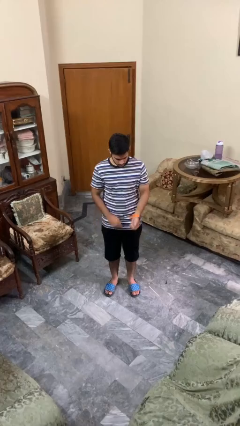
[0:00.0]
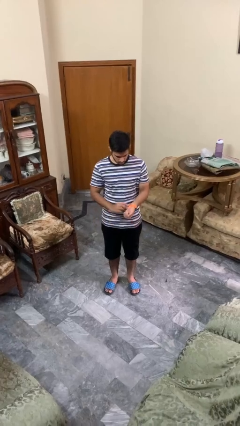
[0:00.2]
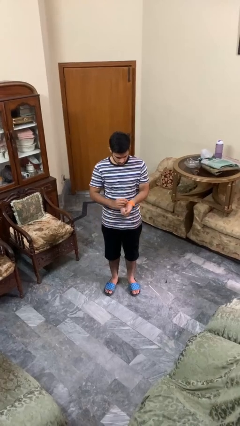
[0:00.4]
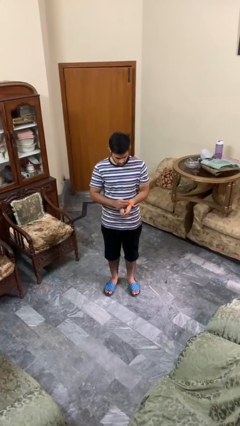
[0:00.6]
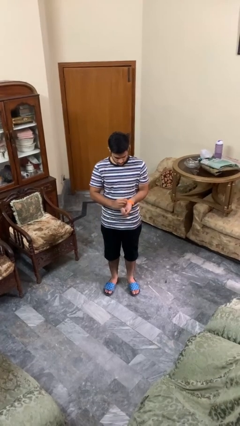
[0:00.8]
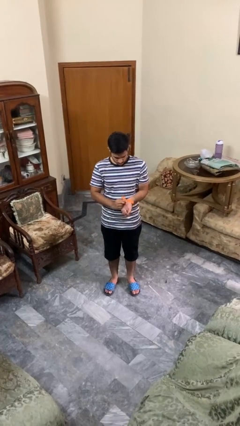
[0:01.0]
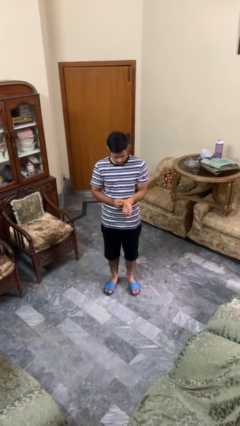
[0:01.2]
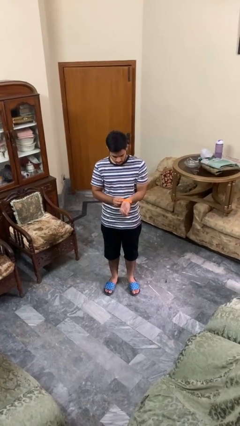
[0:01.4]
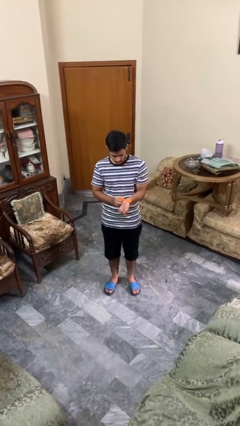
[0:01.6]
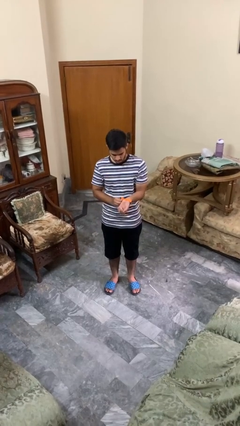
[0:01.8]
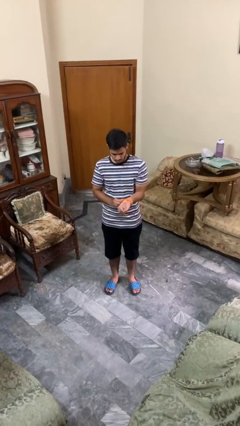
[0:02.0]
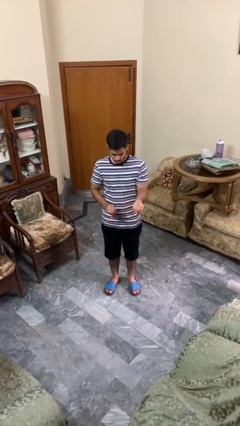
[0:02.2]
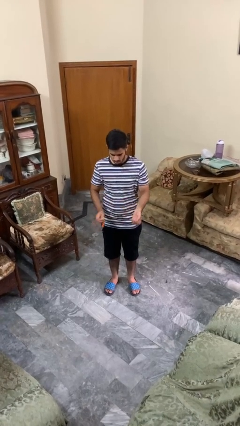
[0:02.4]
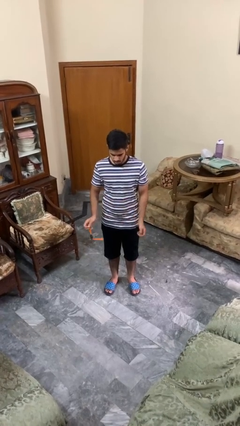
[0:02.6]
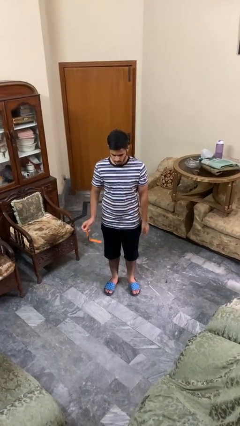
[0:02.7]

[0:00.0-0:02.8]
person takes off wristwatch

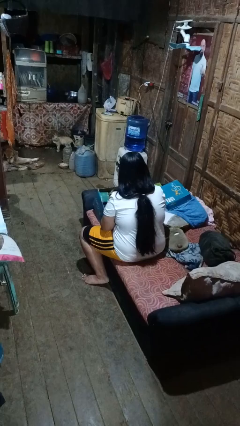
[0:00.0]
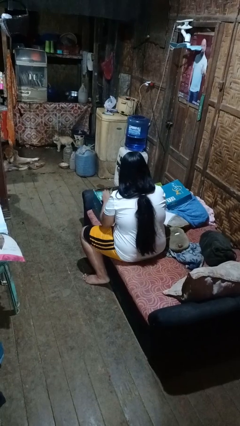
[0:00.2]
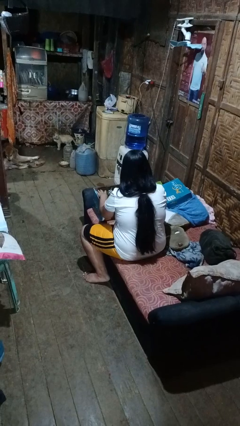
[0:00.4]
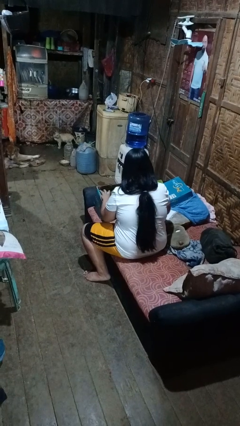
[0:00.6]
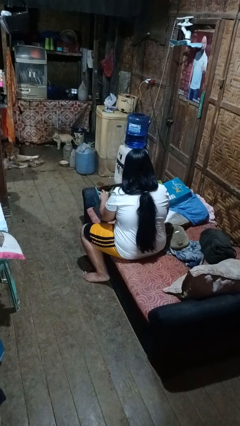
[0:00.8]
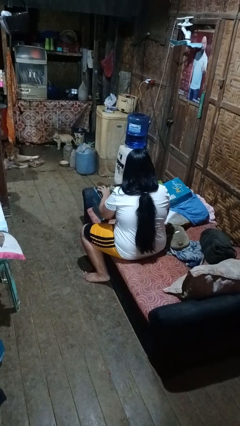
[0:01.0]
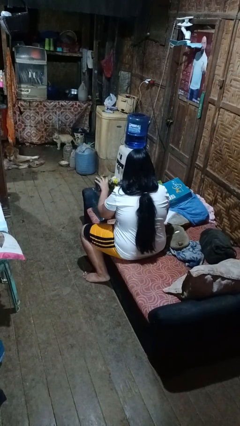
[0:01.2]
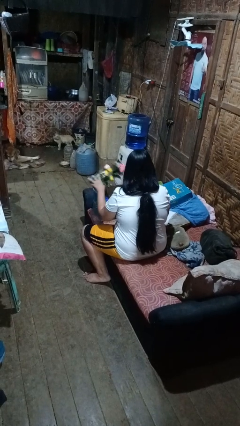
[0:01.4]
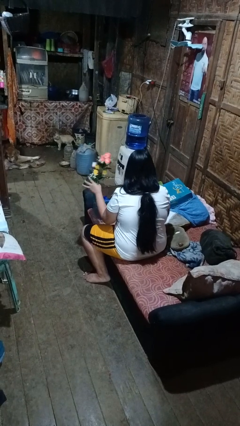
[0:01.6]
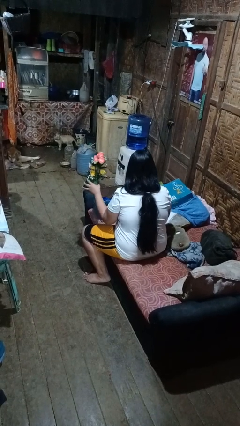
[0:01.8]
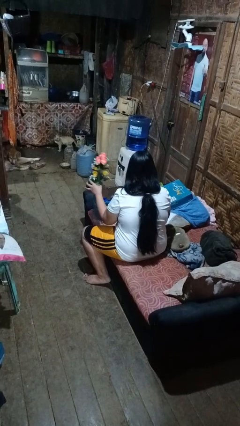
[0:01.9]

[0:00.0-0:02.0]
person searches in box

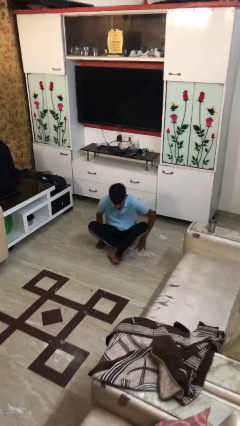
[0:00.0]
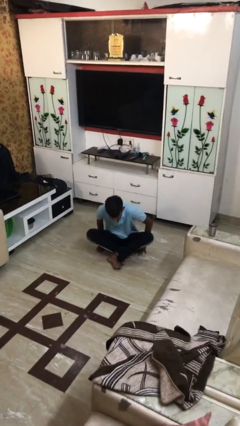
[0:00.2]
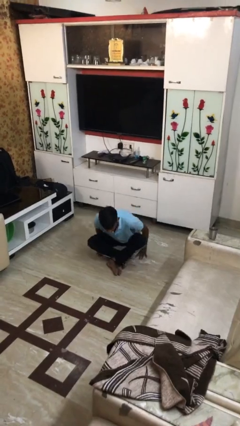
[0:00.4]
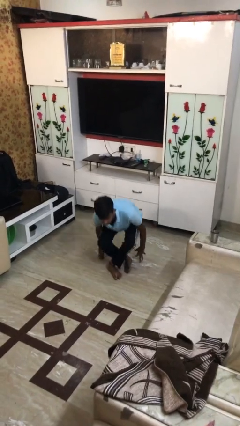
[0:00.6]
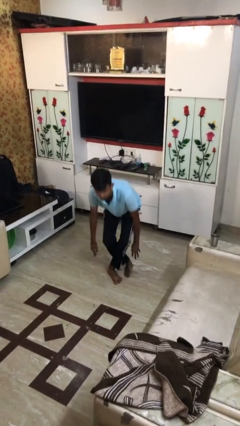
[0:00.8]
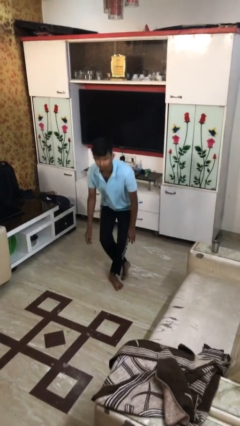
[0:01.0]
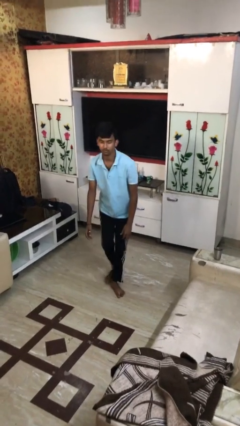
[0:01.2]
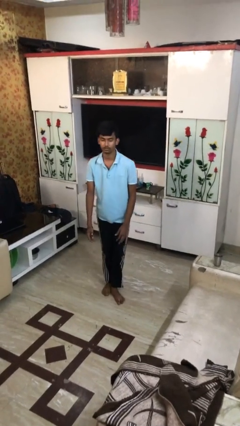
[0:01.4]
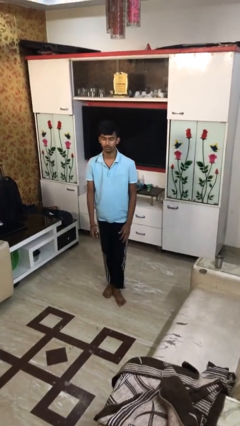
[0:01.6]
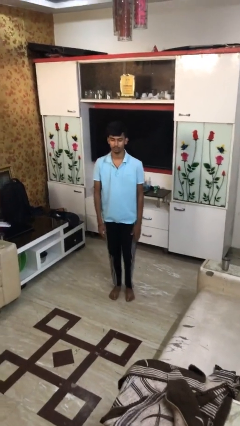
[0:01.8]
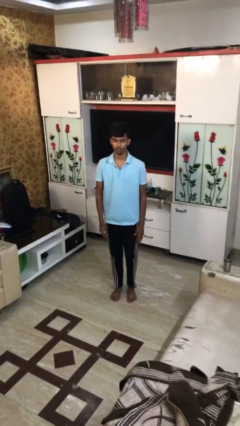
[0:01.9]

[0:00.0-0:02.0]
person stands up from floor

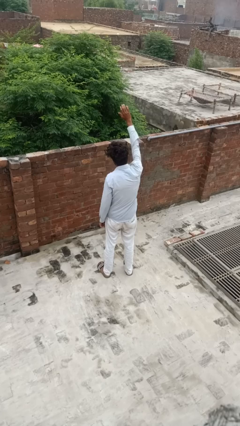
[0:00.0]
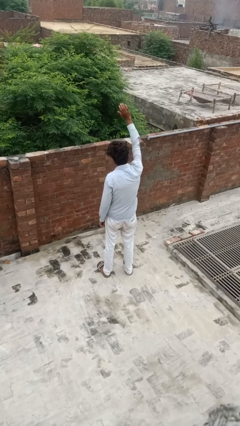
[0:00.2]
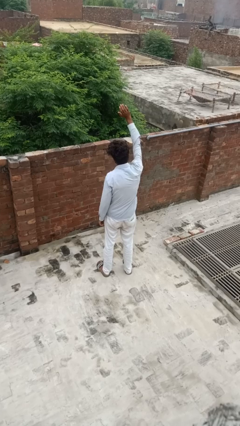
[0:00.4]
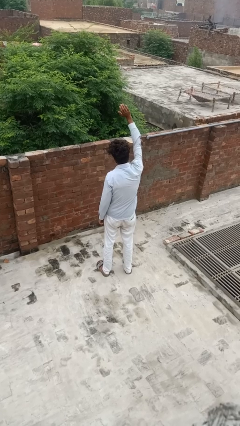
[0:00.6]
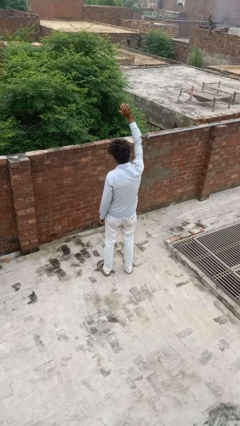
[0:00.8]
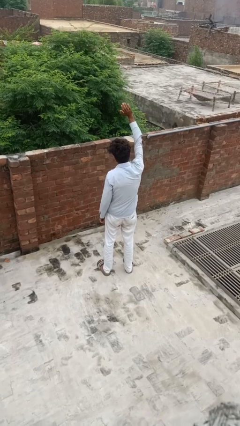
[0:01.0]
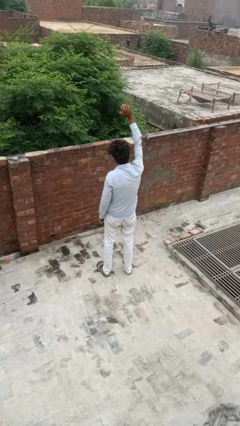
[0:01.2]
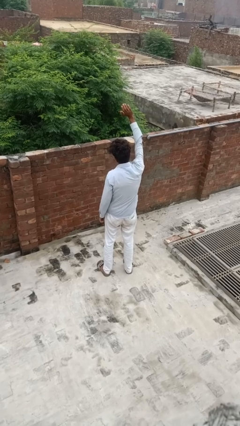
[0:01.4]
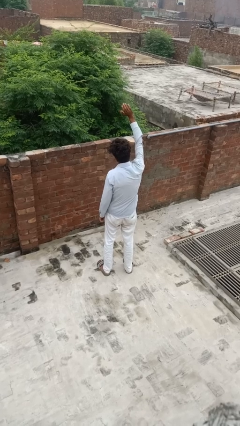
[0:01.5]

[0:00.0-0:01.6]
person gestures raise hand

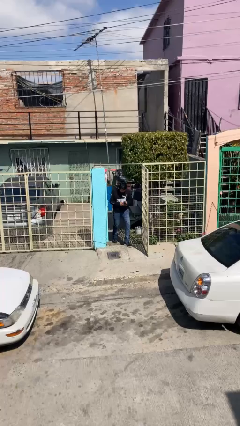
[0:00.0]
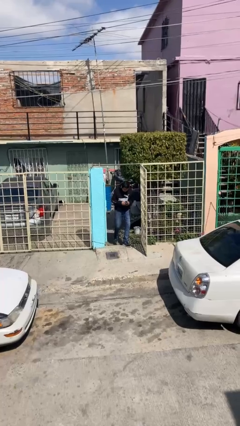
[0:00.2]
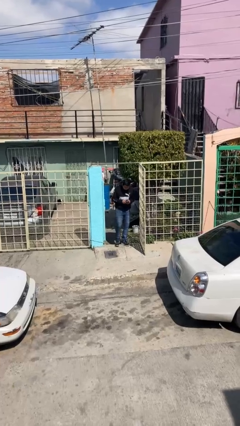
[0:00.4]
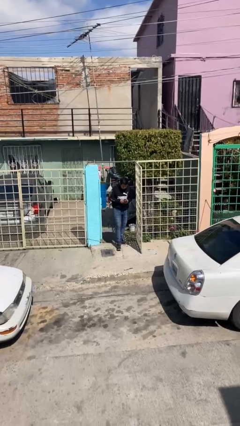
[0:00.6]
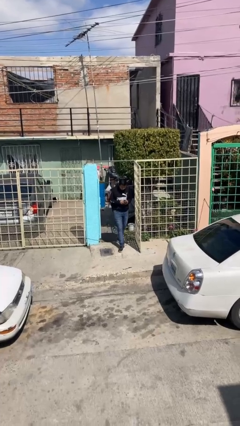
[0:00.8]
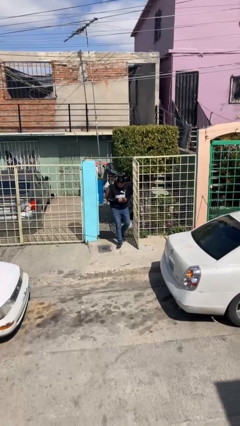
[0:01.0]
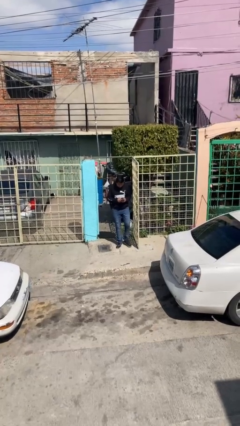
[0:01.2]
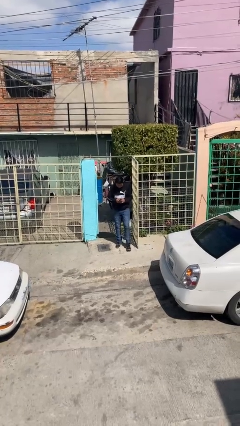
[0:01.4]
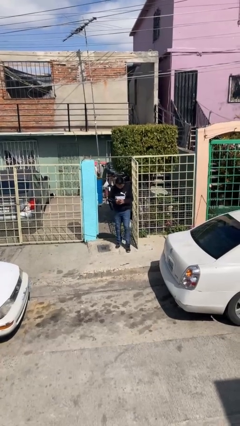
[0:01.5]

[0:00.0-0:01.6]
person enters scene through structure

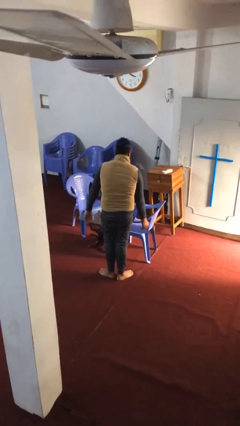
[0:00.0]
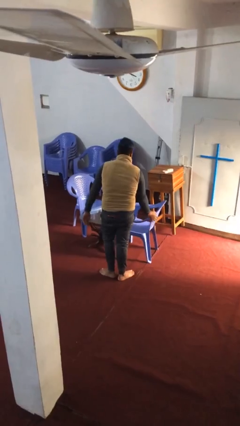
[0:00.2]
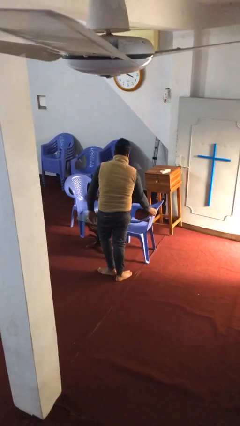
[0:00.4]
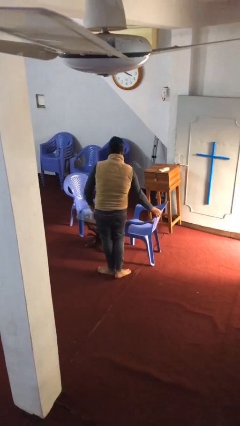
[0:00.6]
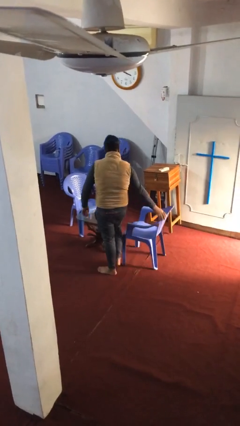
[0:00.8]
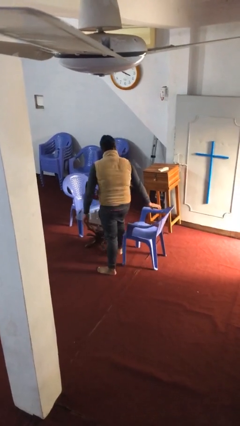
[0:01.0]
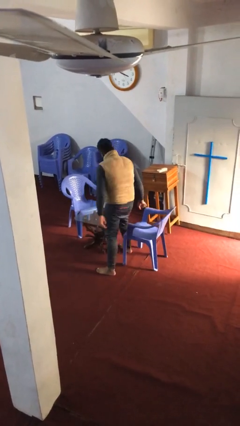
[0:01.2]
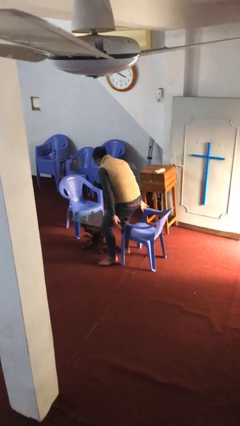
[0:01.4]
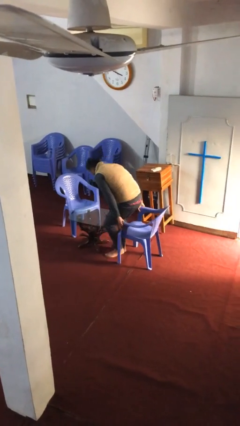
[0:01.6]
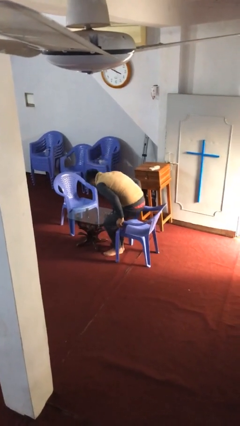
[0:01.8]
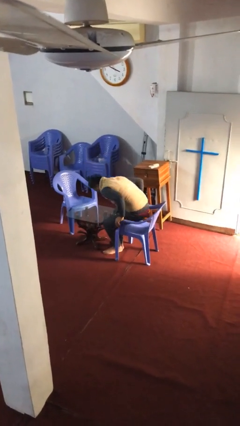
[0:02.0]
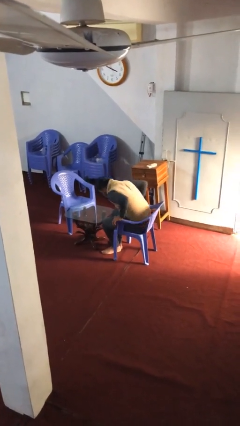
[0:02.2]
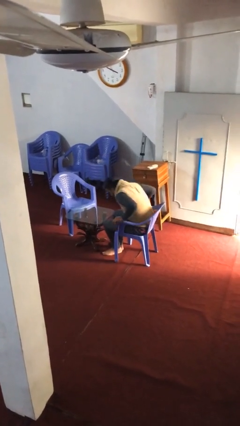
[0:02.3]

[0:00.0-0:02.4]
person sits down

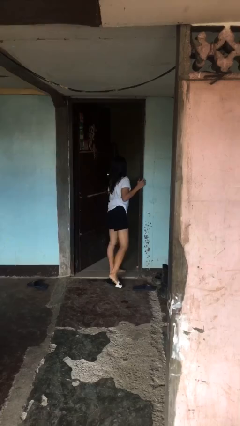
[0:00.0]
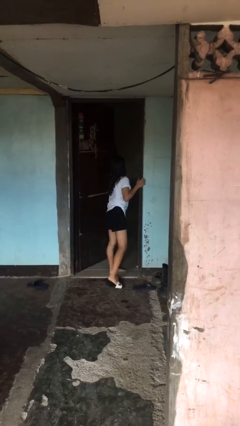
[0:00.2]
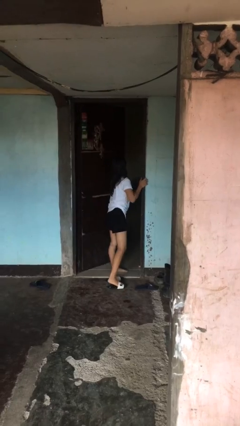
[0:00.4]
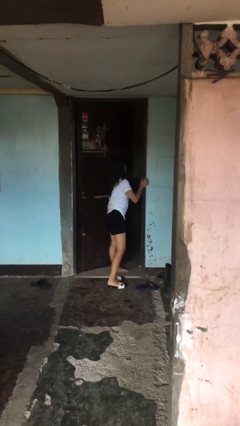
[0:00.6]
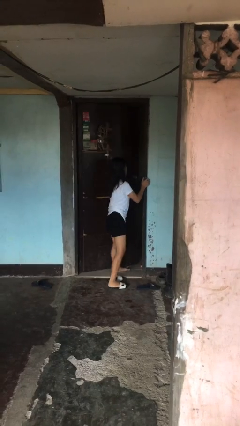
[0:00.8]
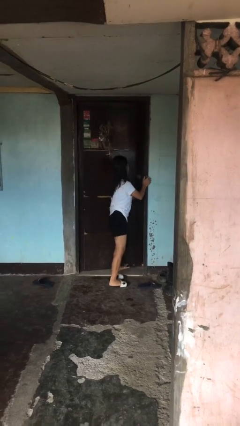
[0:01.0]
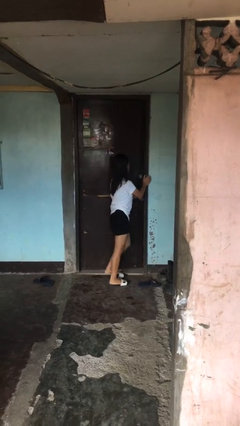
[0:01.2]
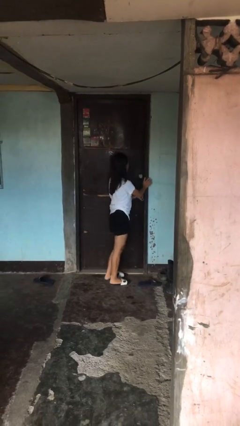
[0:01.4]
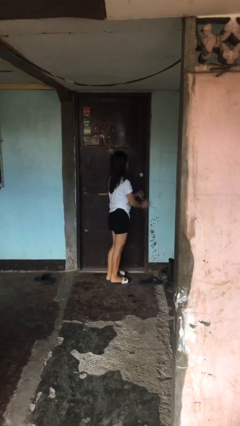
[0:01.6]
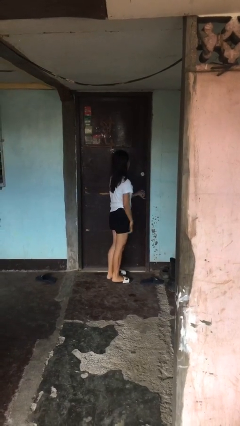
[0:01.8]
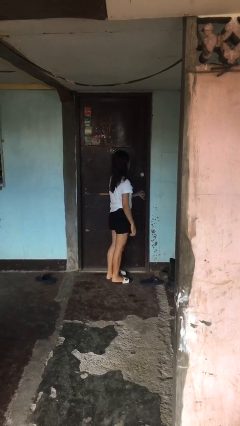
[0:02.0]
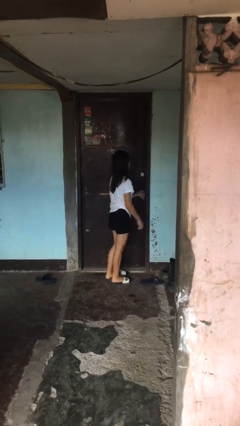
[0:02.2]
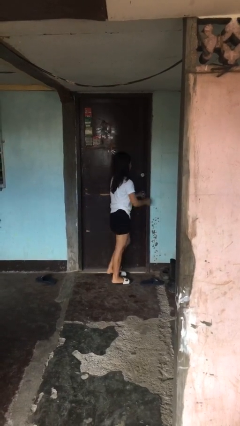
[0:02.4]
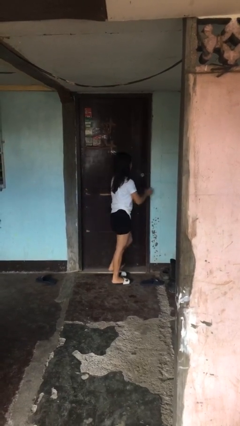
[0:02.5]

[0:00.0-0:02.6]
person closes facility door

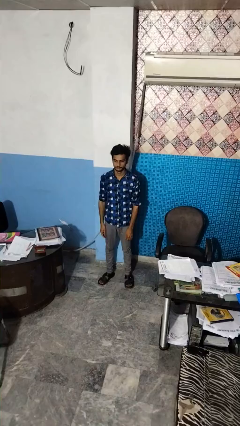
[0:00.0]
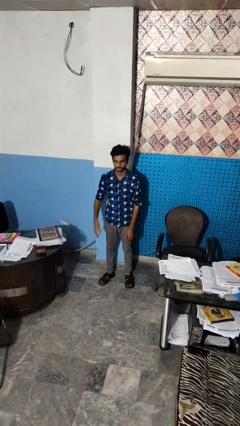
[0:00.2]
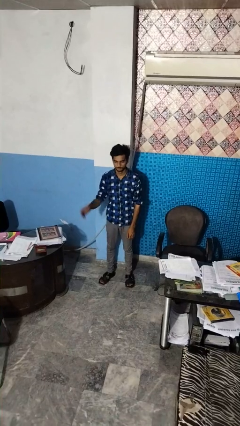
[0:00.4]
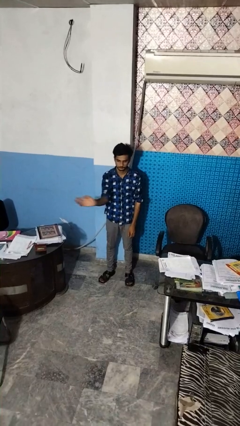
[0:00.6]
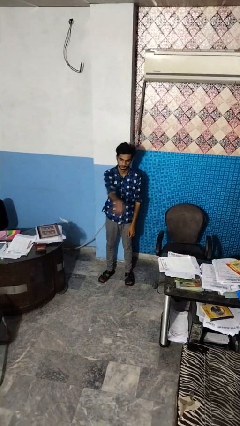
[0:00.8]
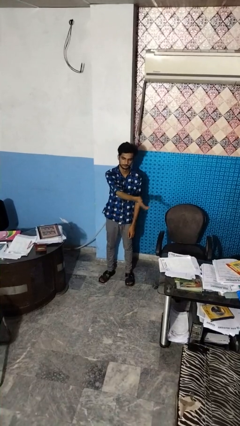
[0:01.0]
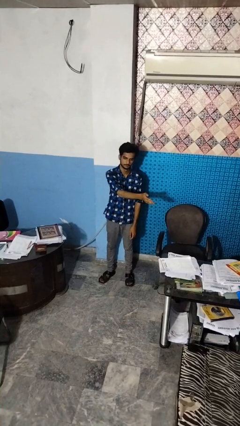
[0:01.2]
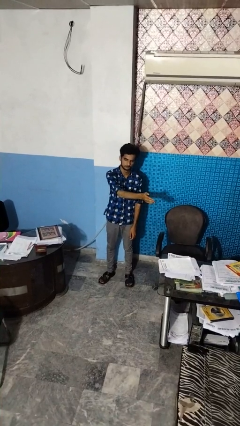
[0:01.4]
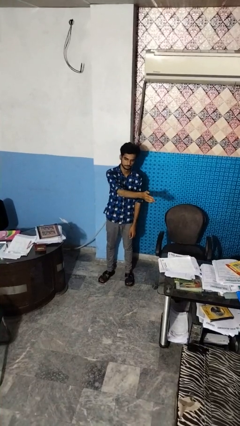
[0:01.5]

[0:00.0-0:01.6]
person gestures swipe left

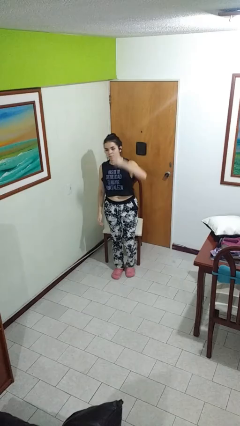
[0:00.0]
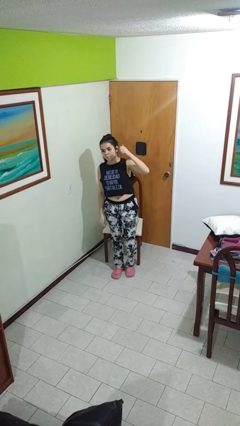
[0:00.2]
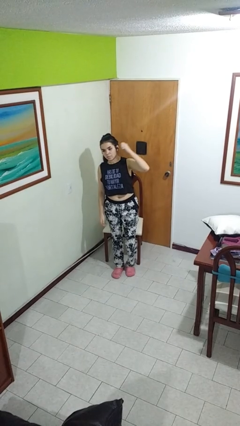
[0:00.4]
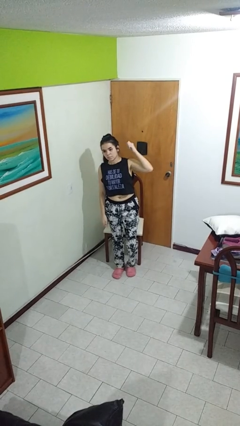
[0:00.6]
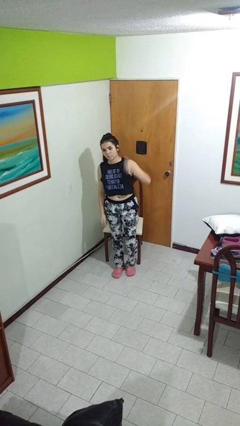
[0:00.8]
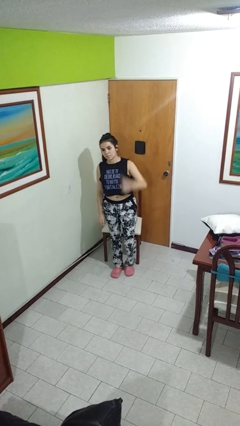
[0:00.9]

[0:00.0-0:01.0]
person gestures behind me
